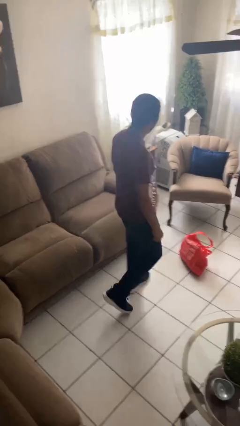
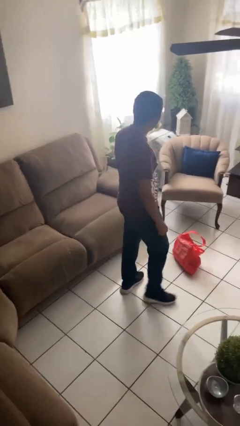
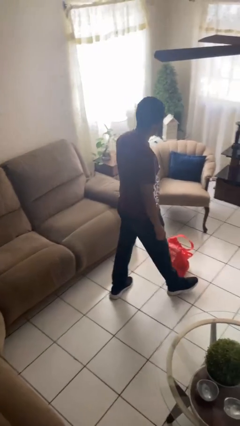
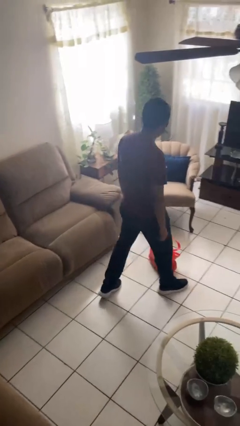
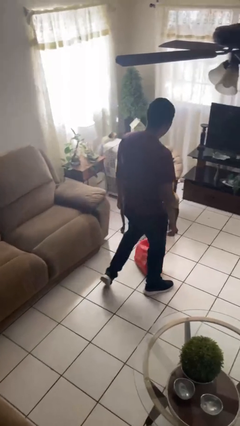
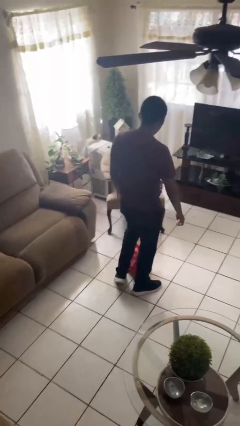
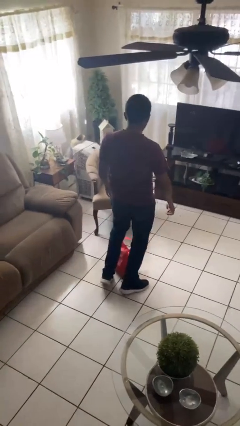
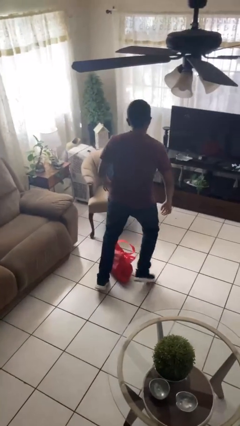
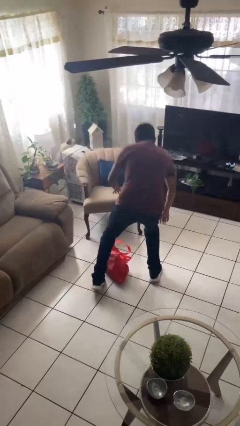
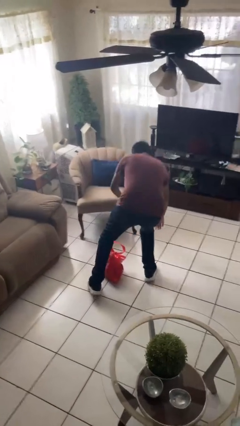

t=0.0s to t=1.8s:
person trips on object on floor

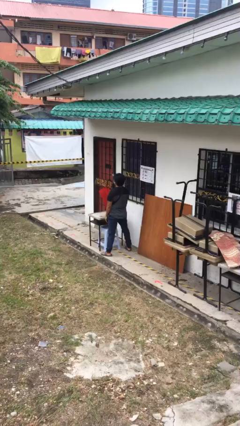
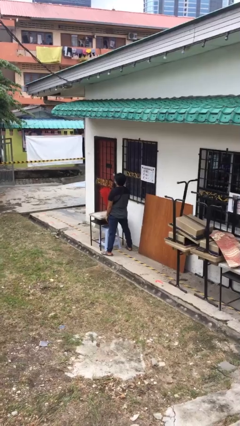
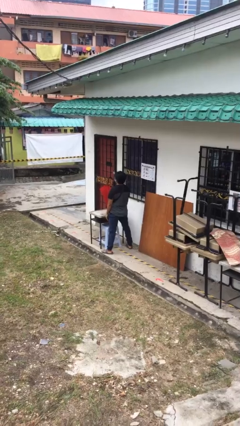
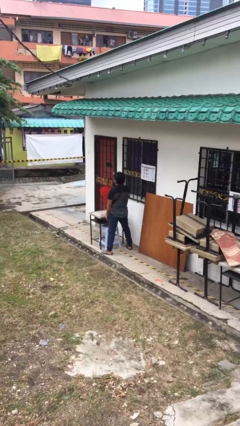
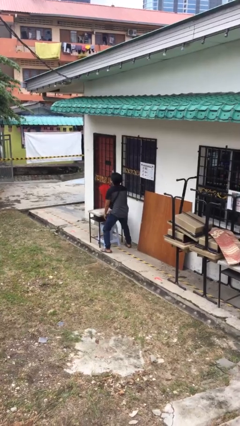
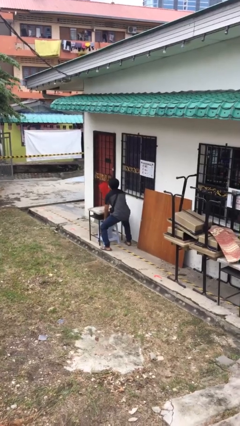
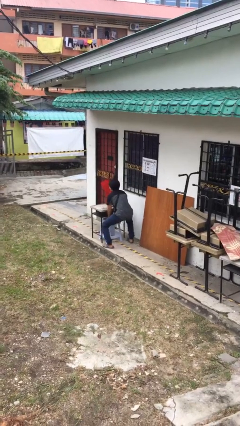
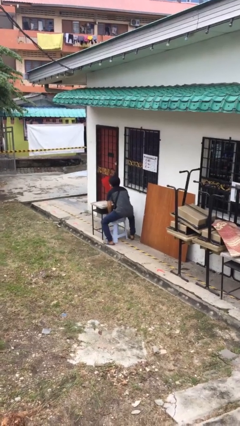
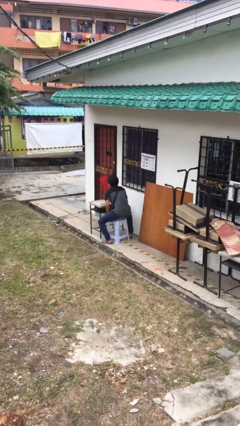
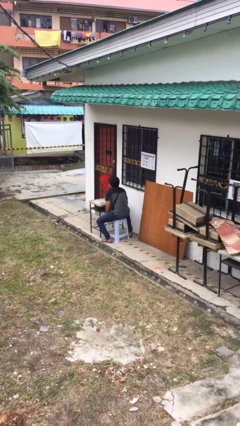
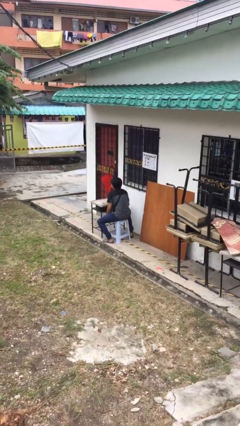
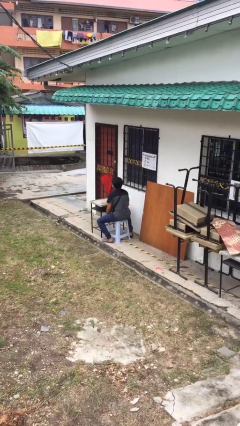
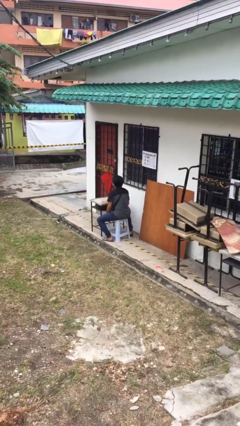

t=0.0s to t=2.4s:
person sits down

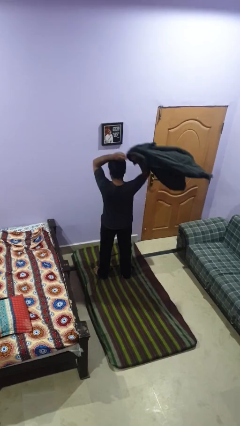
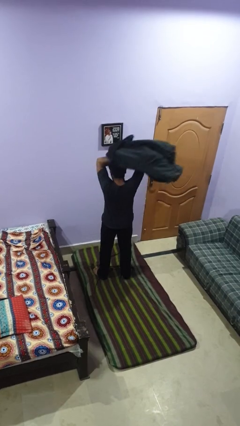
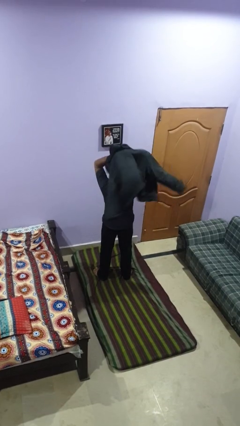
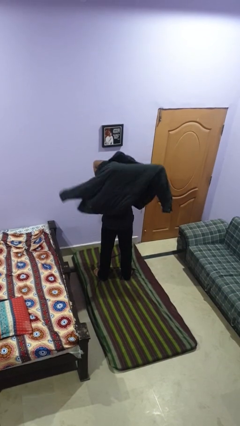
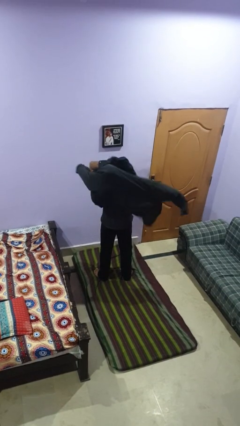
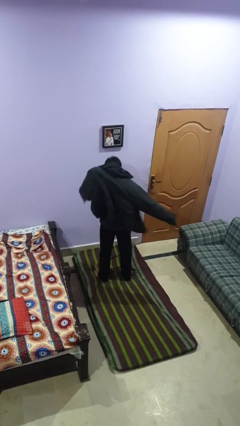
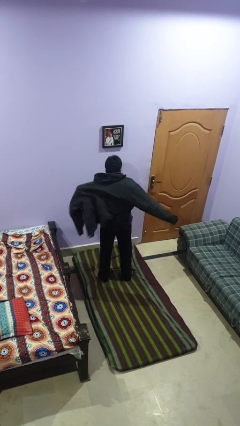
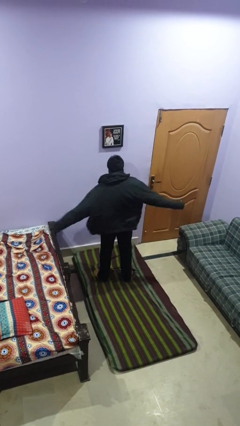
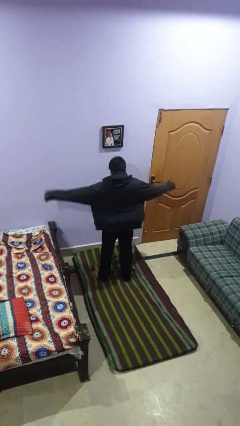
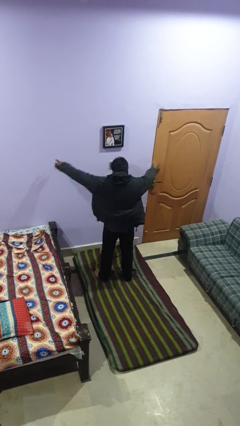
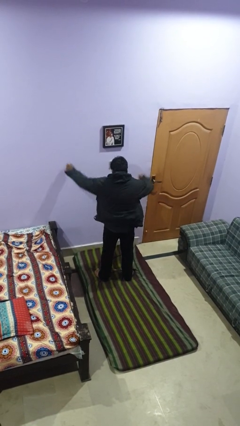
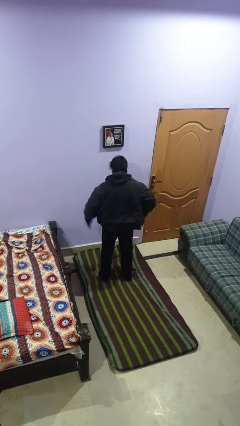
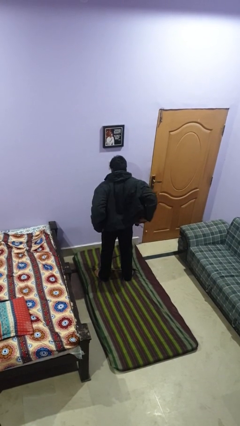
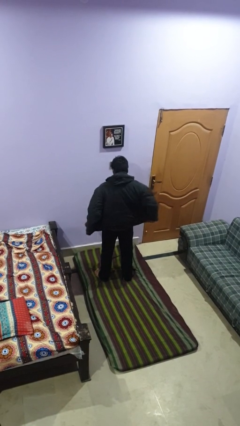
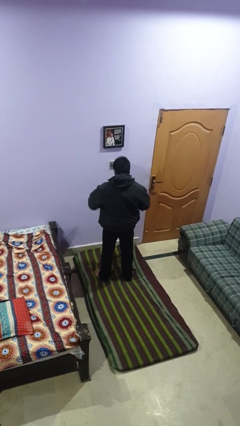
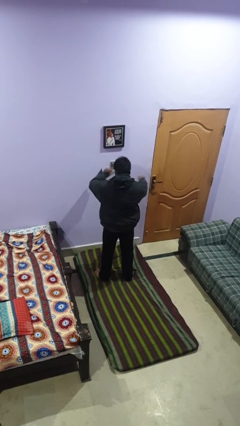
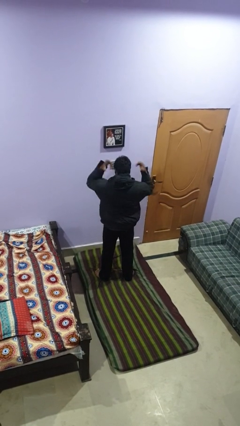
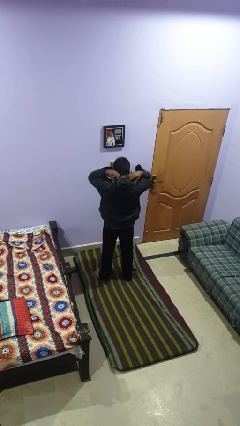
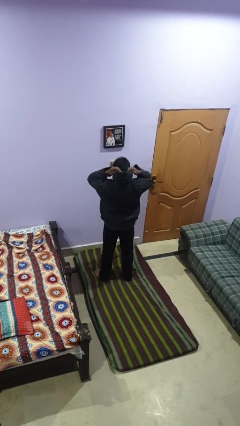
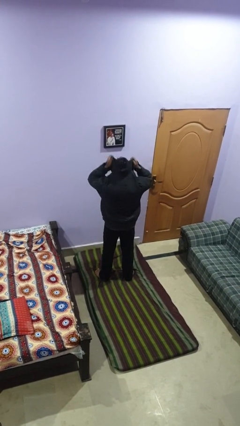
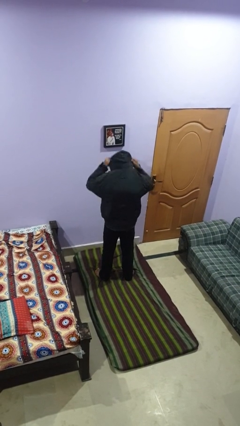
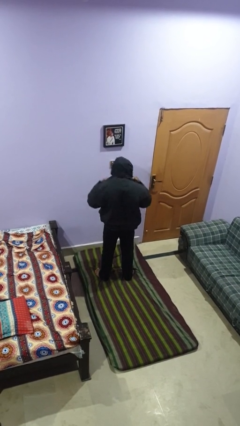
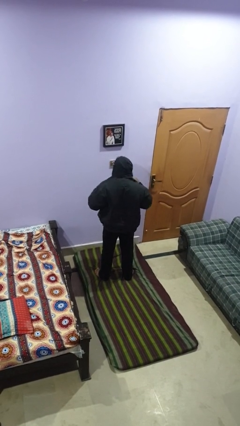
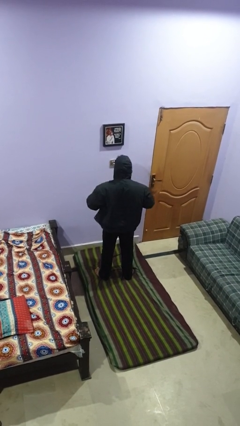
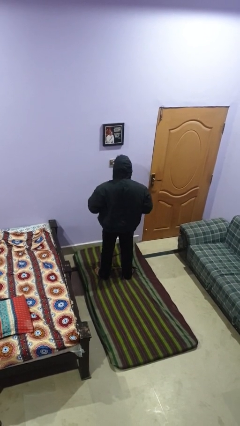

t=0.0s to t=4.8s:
person puts on hoodie

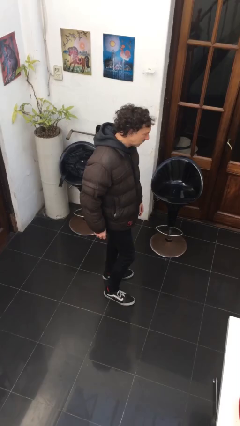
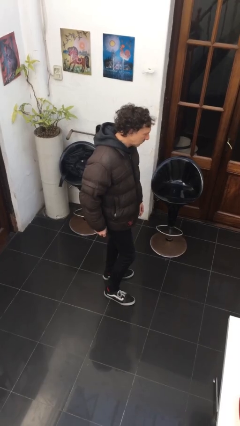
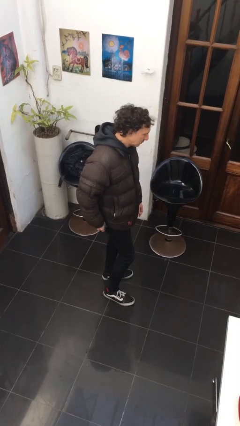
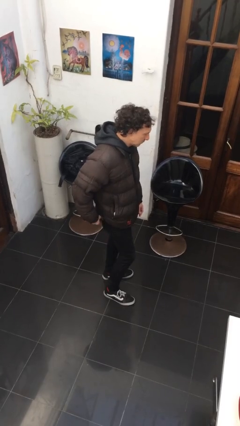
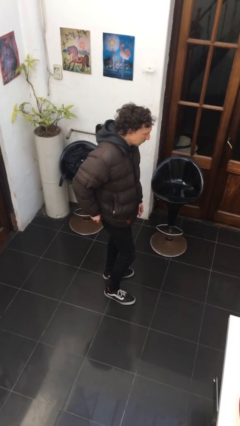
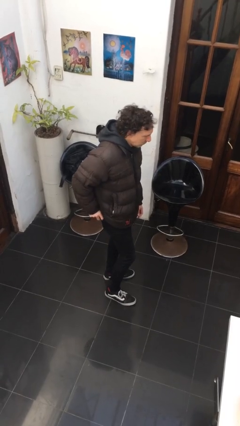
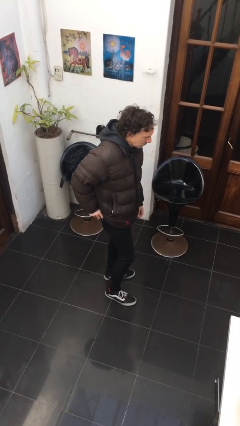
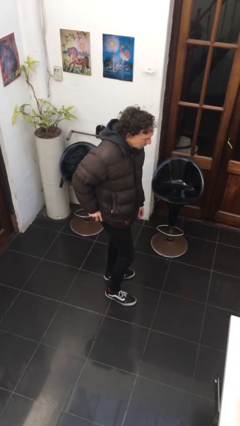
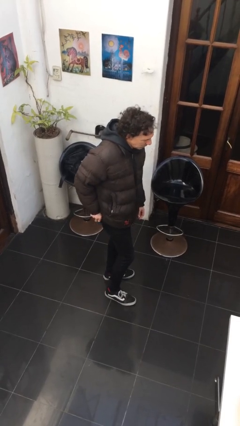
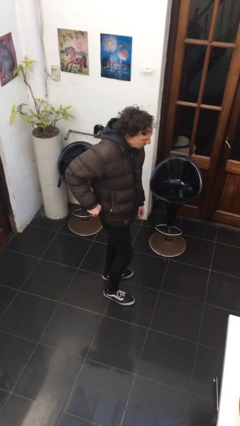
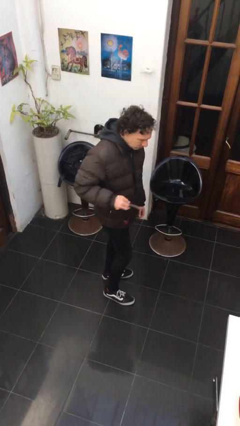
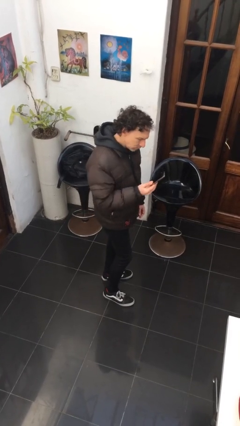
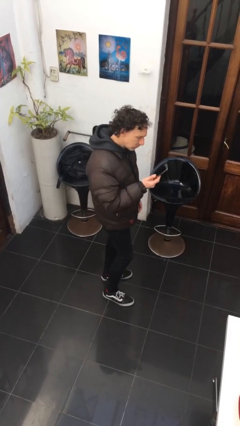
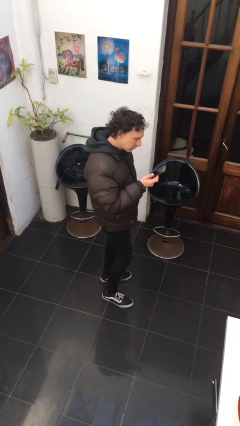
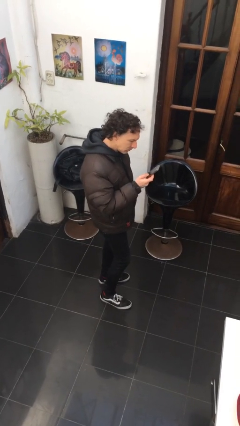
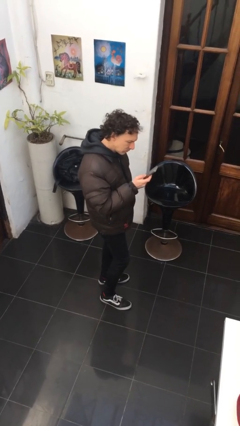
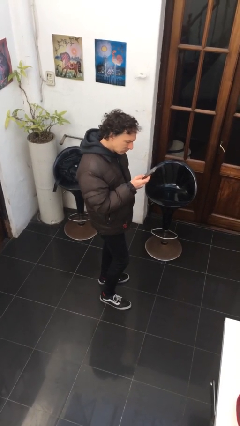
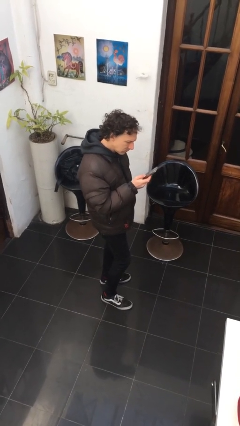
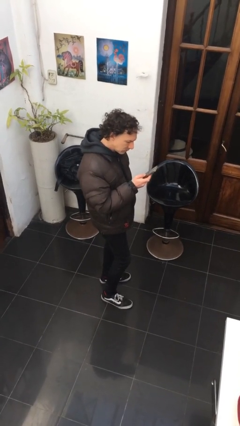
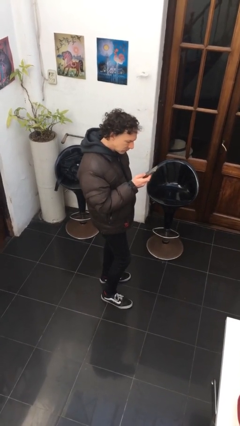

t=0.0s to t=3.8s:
person takes phone from pocket

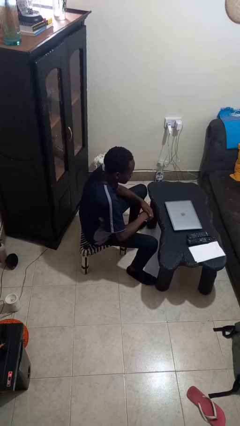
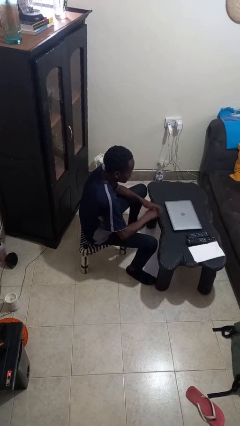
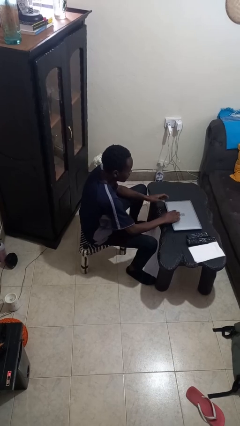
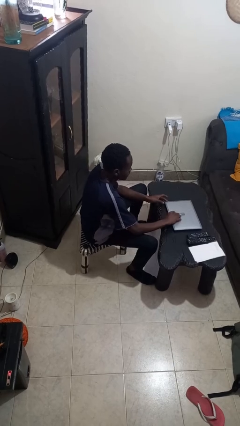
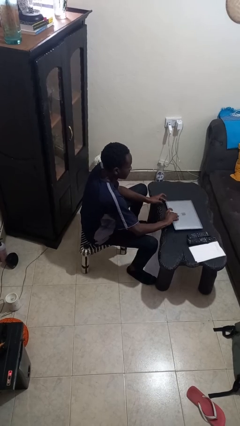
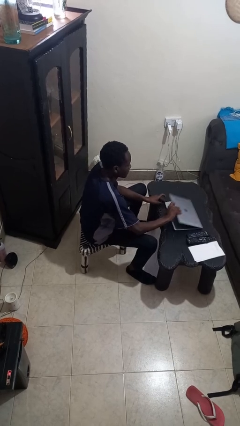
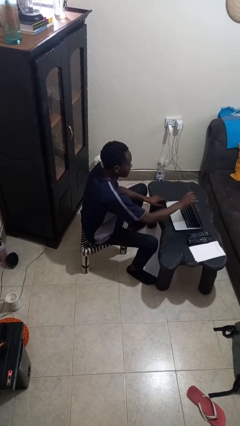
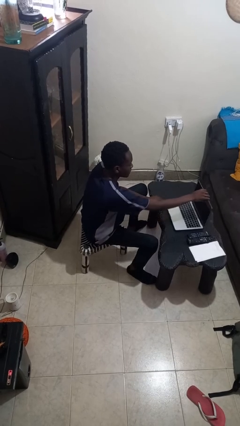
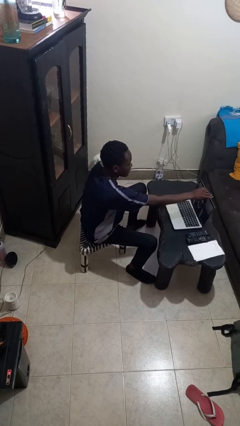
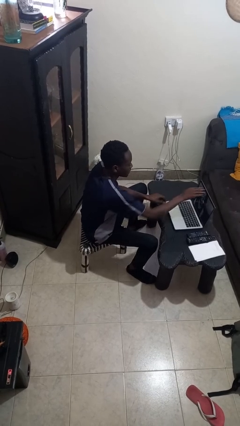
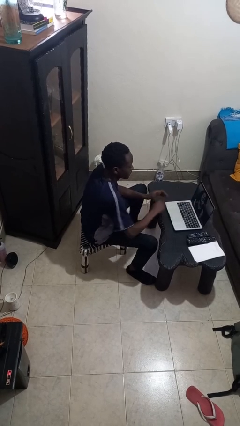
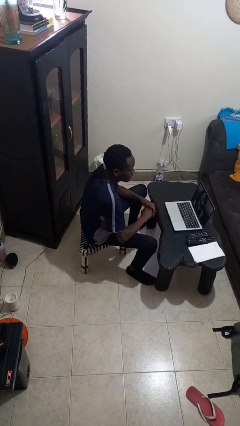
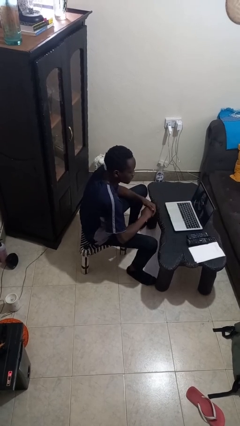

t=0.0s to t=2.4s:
person opens laptop

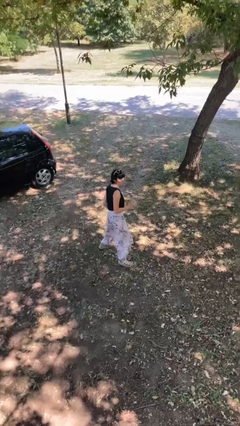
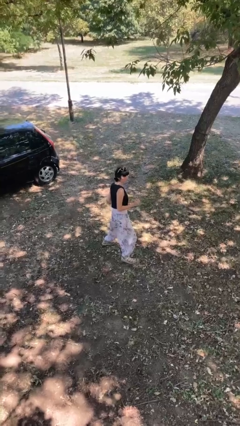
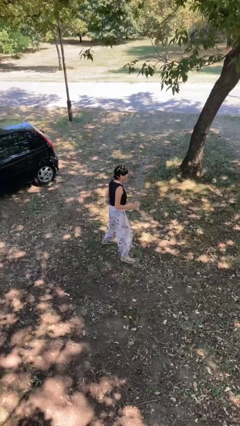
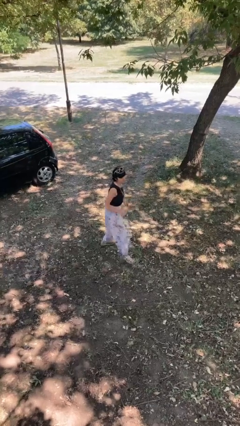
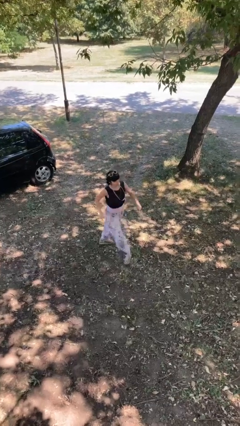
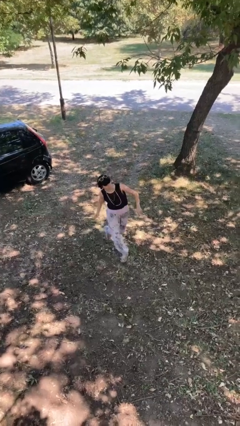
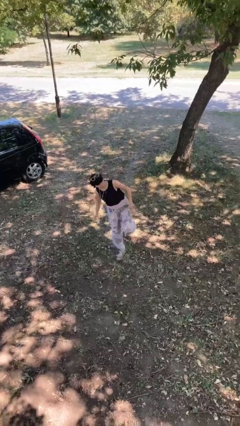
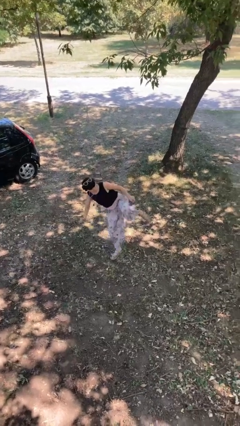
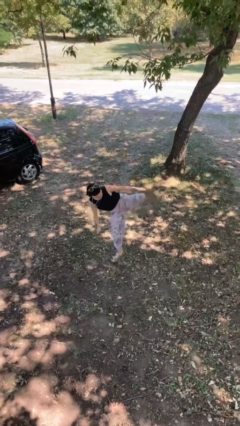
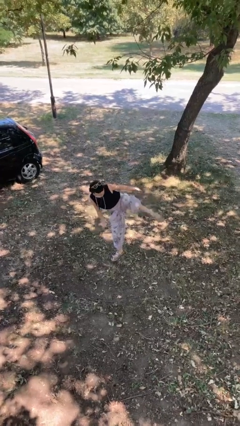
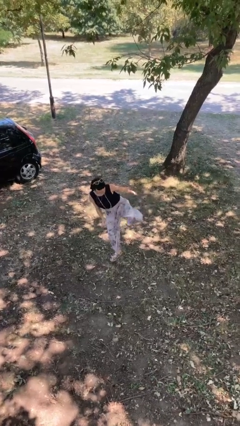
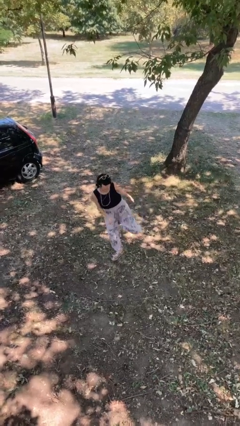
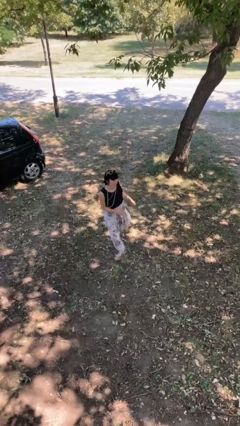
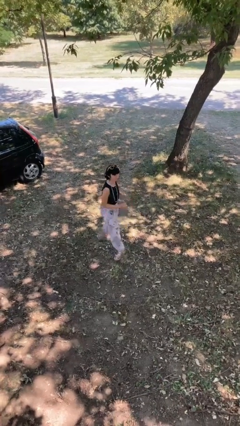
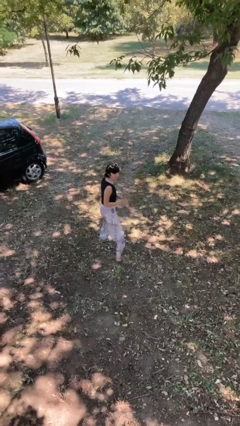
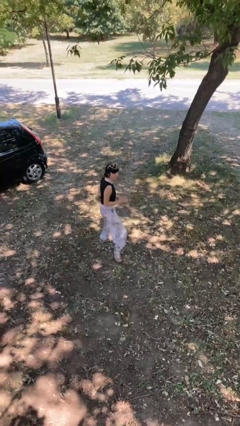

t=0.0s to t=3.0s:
person karate kicks
